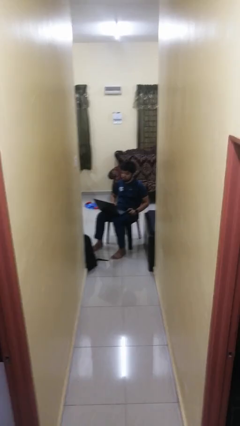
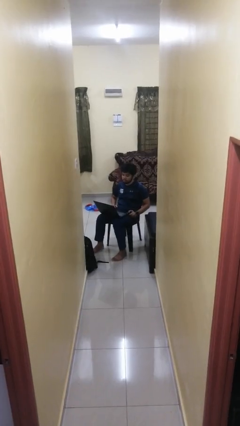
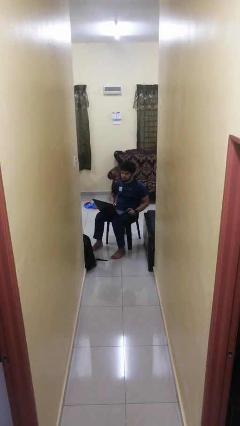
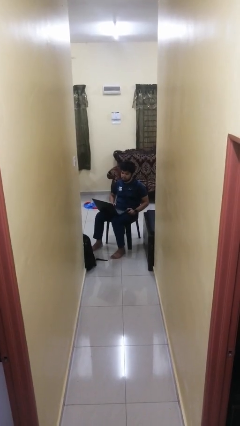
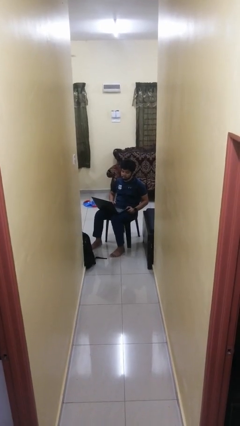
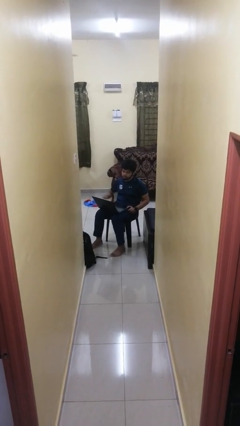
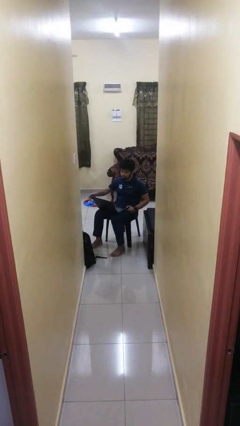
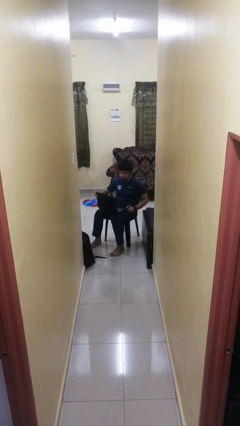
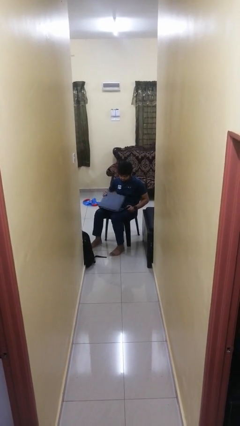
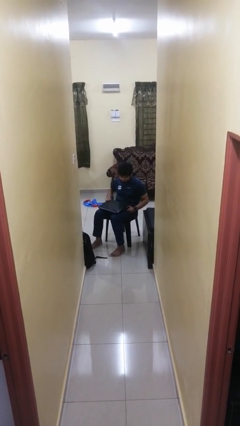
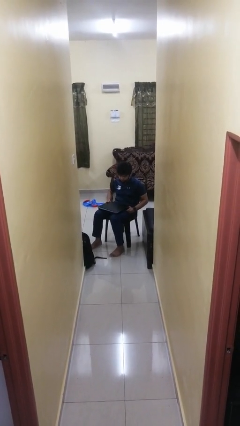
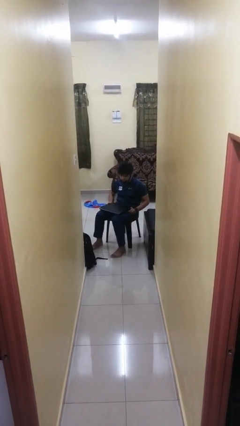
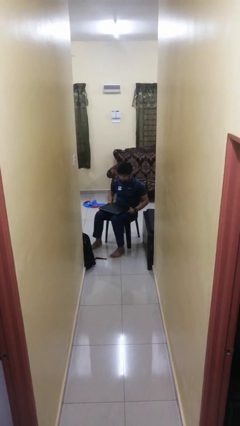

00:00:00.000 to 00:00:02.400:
person closes laptop

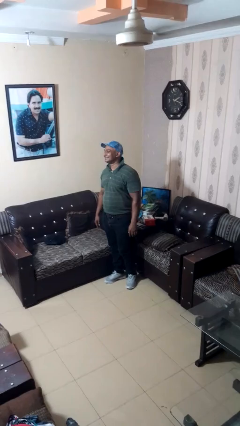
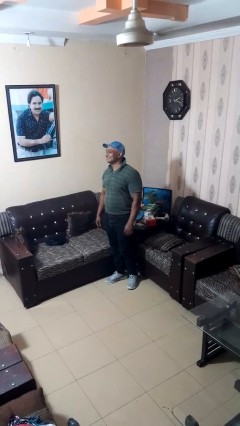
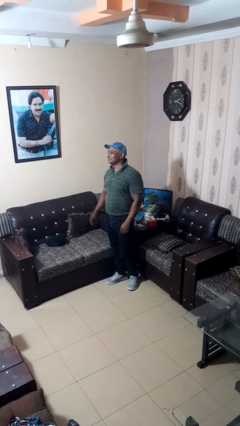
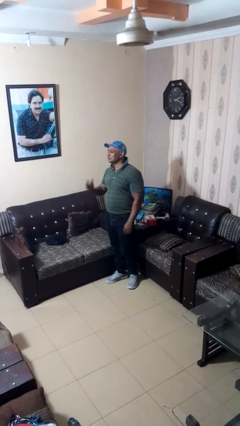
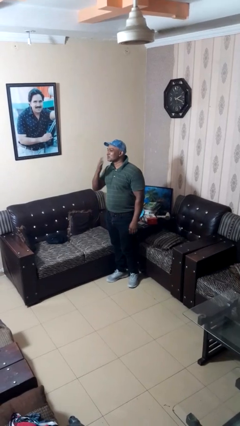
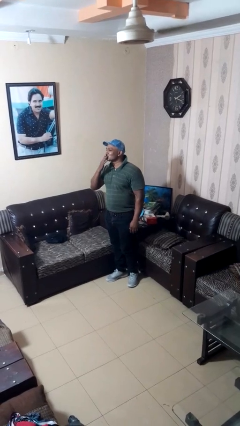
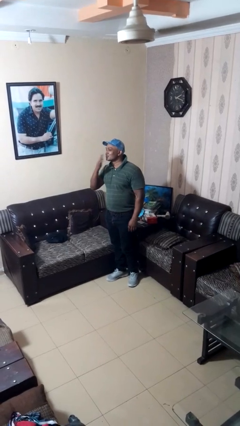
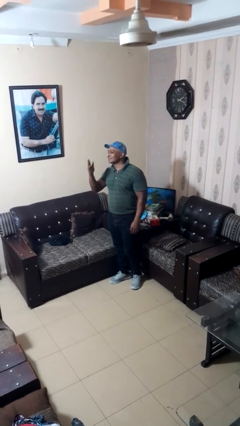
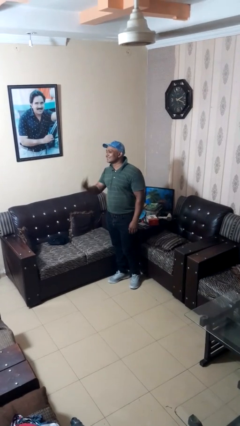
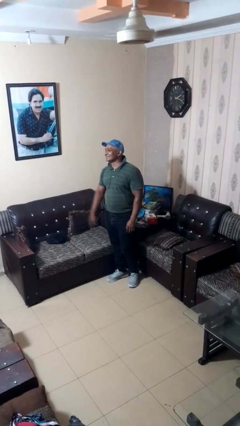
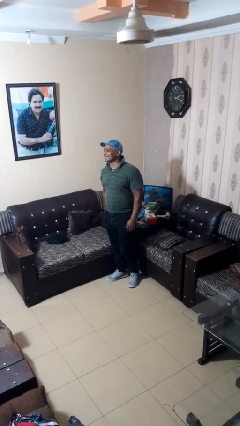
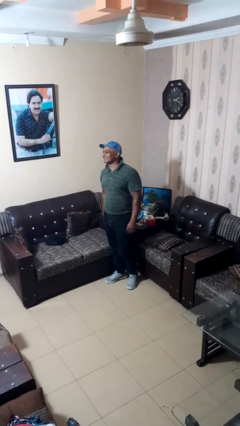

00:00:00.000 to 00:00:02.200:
person gestures blow kiss

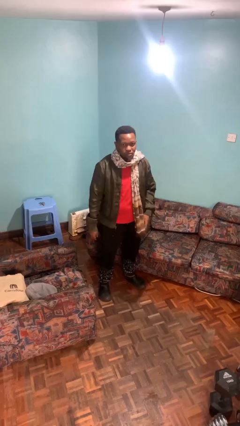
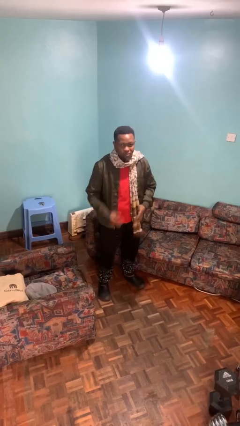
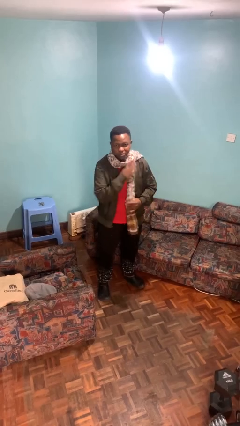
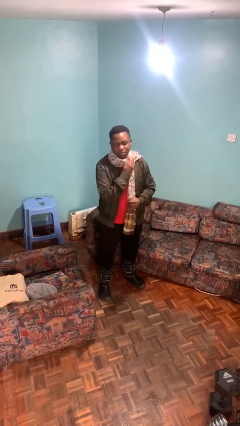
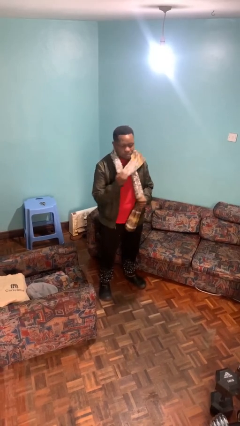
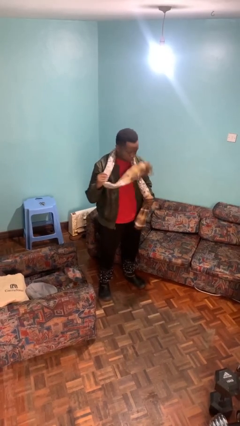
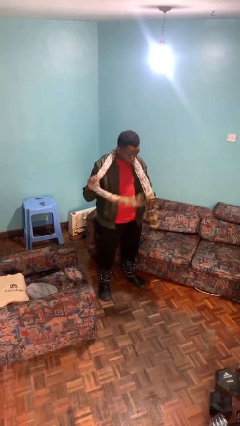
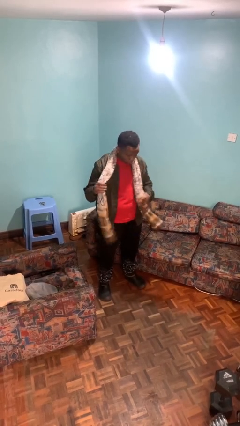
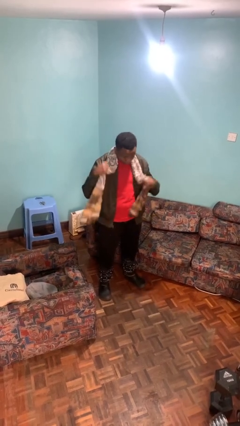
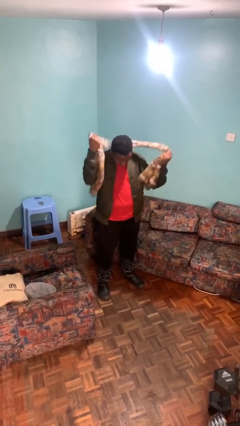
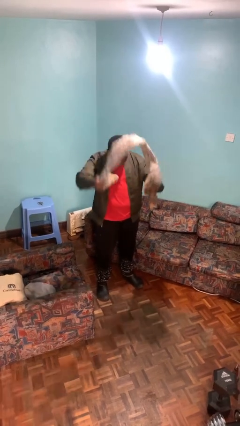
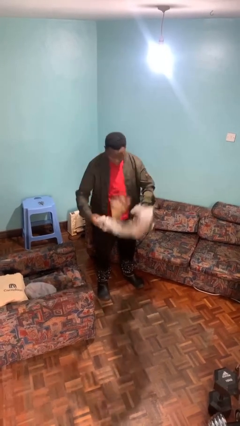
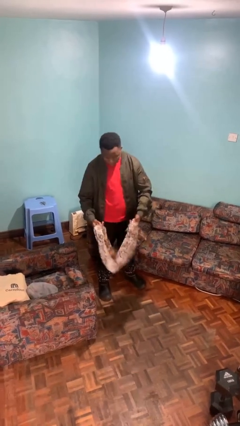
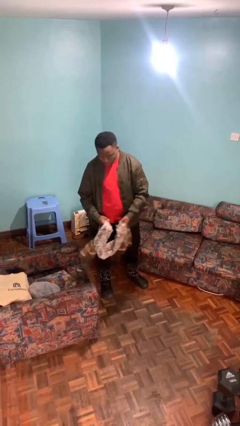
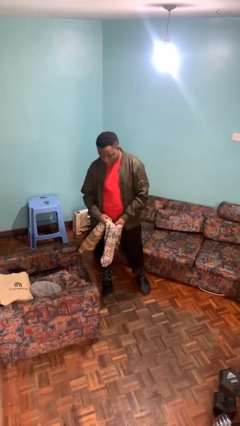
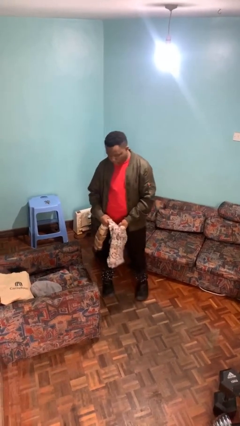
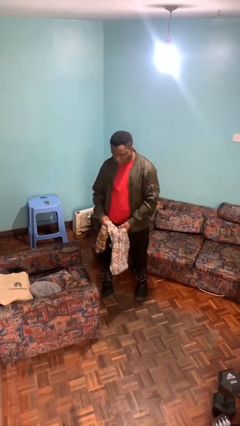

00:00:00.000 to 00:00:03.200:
person takes off scarf

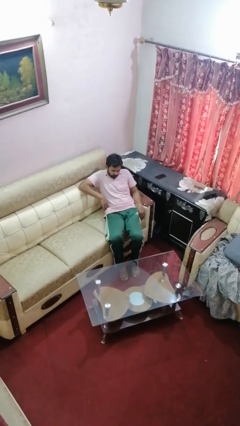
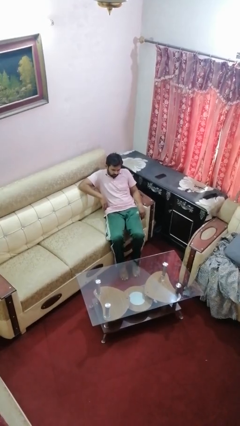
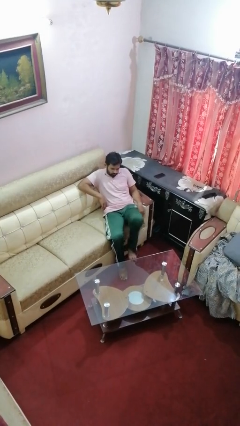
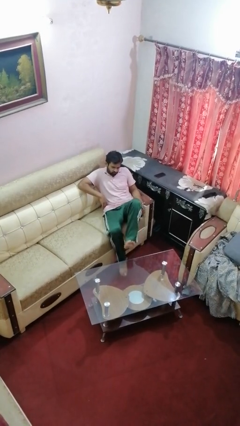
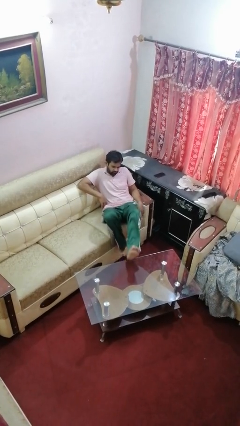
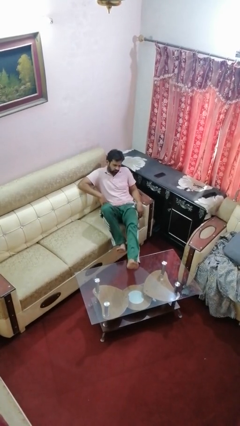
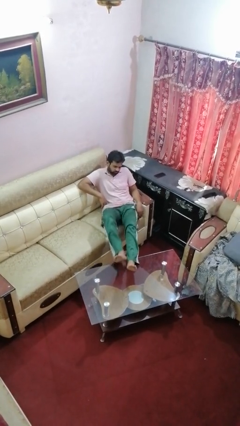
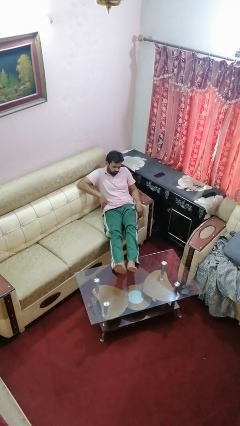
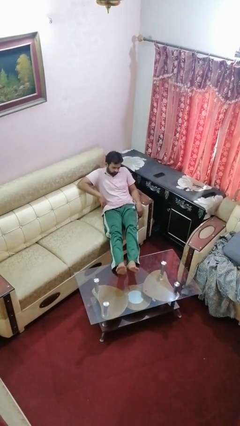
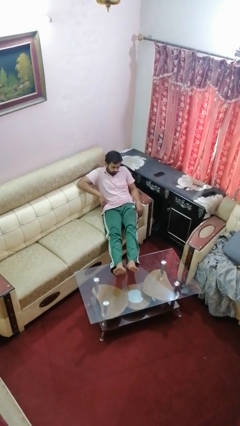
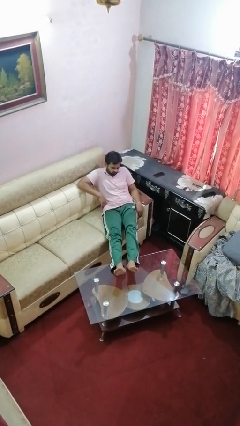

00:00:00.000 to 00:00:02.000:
person puts feet up

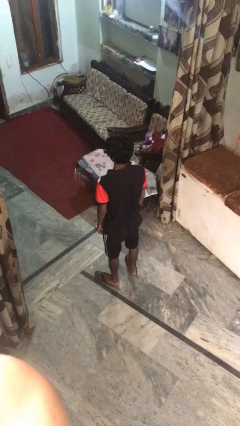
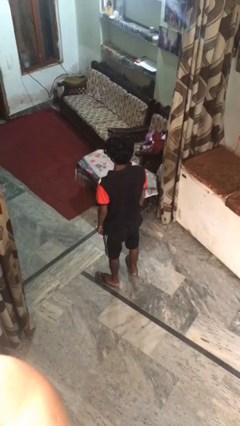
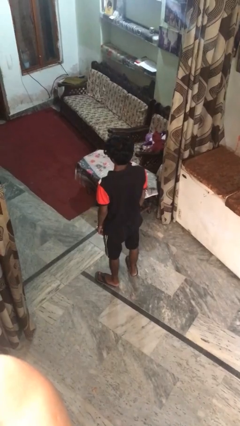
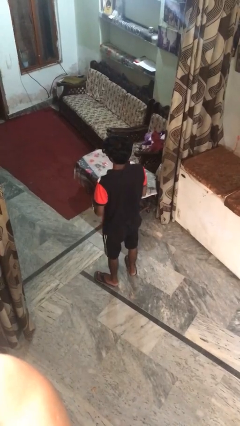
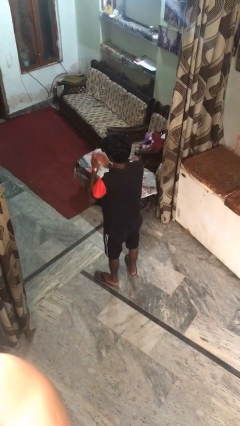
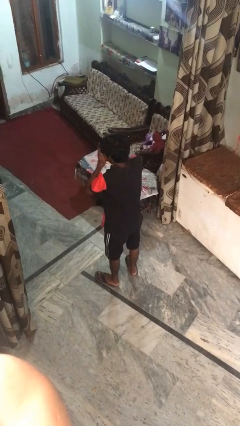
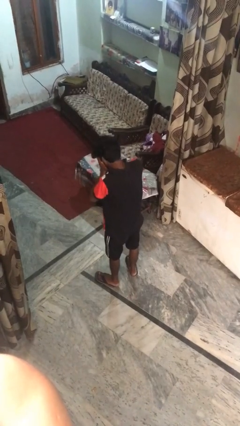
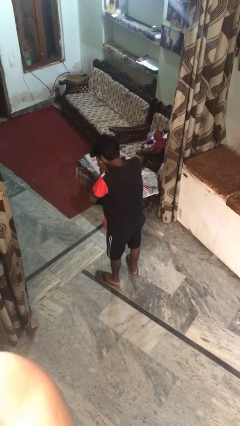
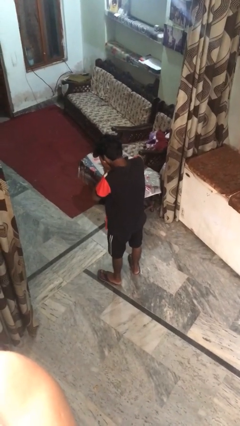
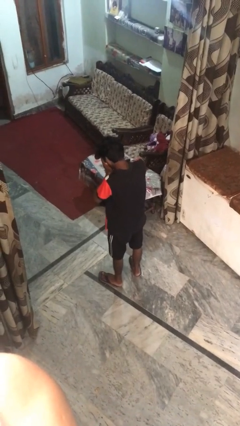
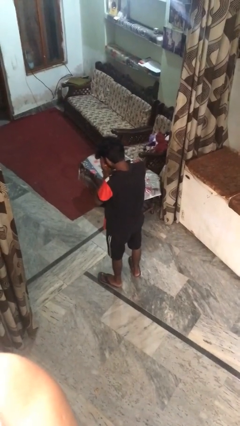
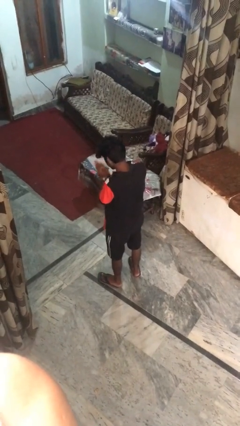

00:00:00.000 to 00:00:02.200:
person sneezes into hand

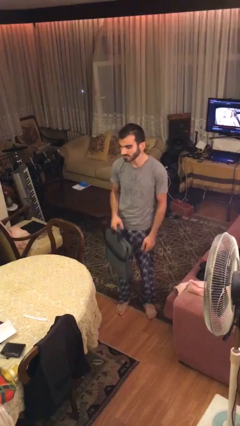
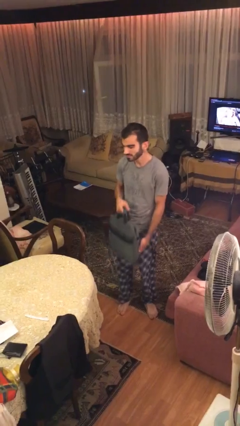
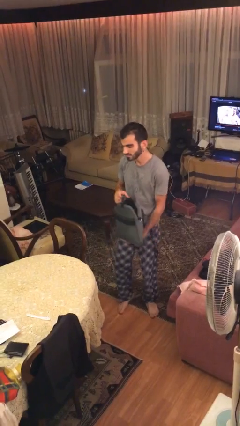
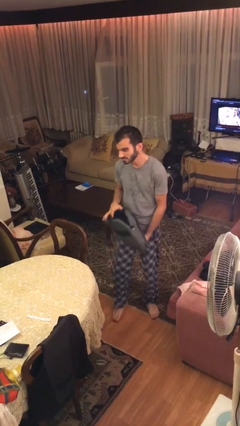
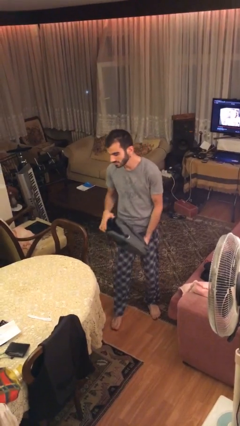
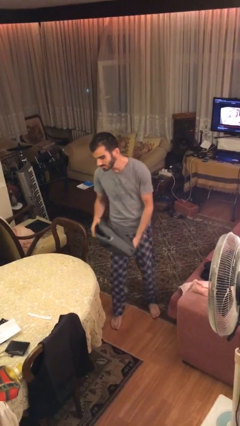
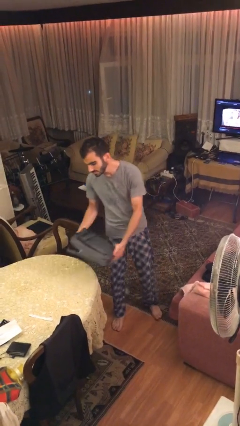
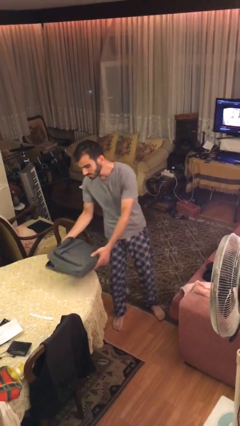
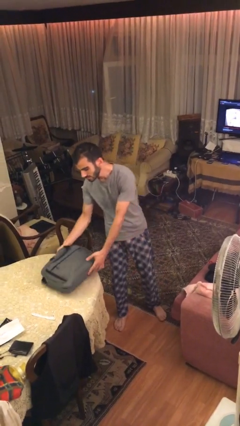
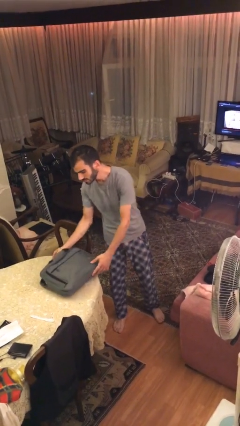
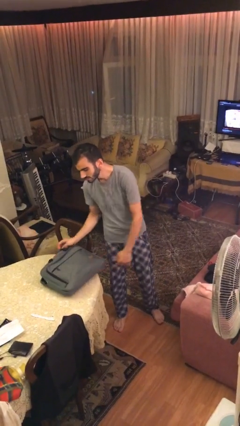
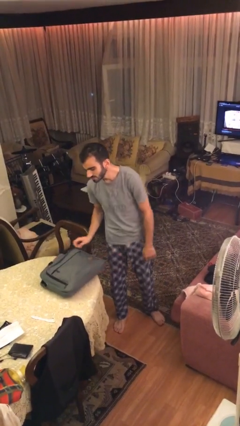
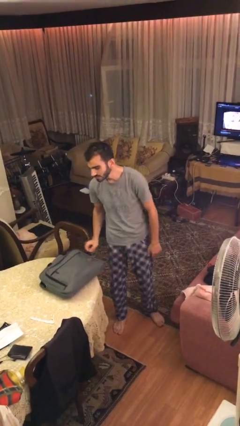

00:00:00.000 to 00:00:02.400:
person puts down object on table

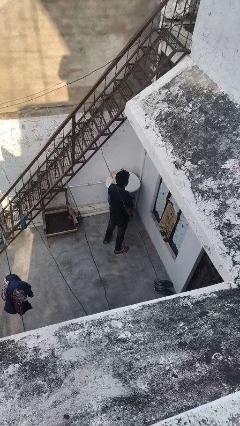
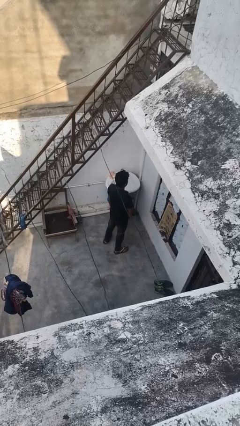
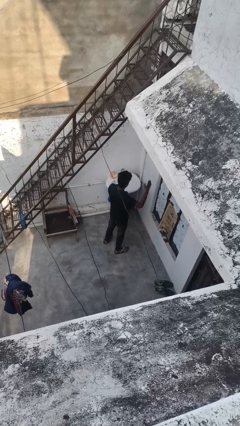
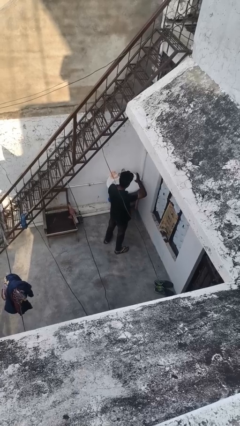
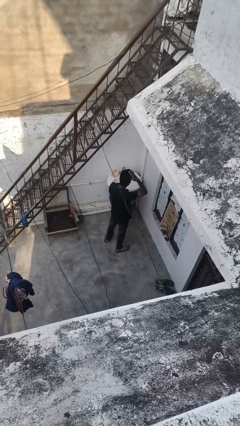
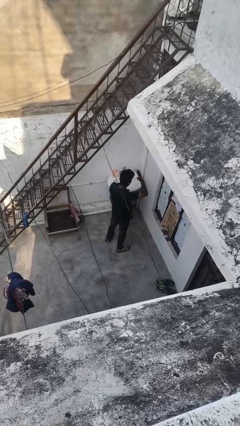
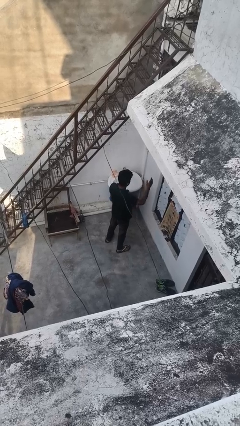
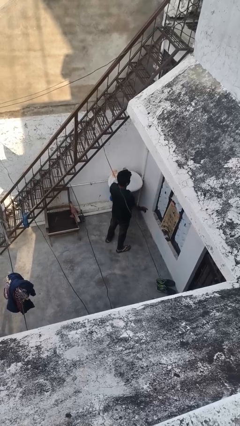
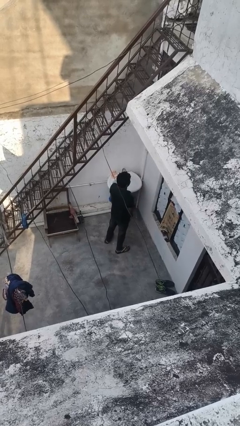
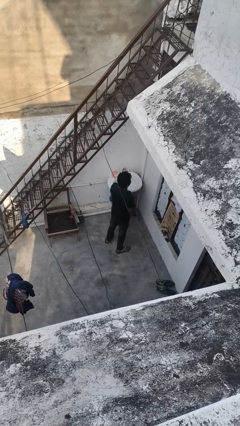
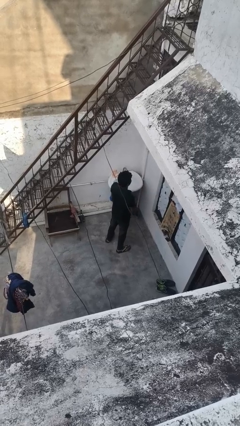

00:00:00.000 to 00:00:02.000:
person pats head

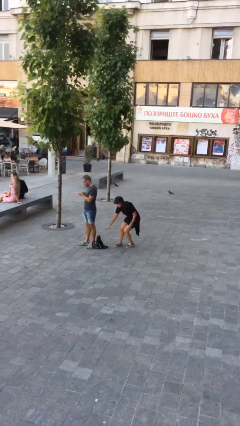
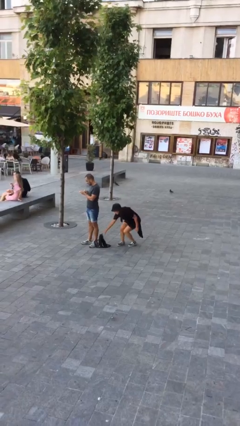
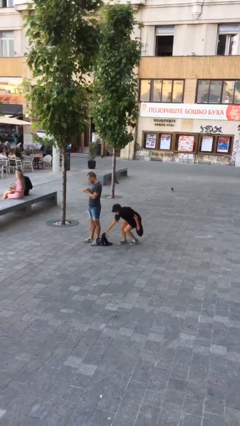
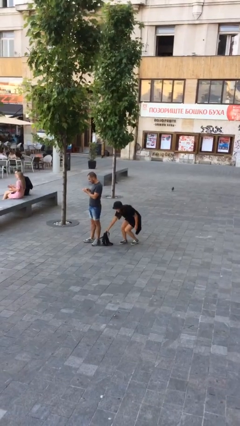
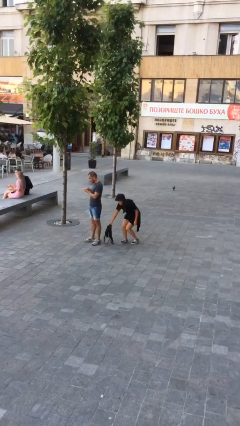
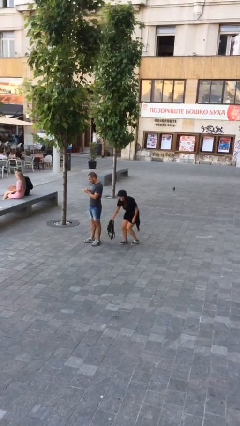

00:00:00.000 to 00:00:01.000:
person steals object from person
